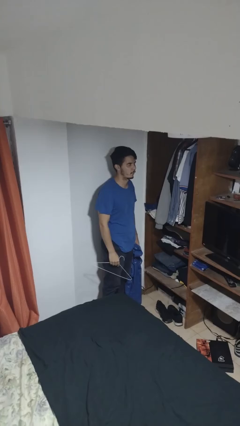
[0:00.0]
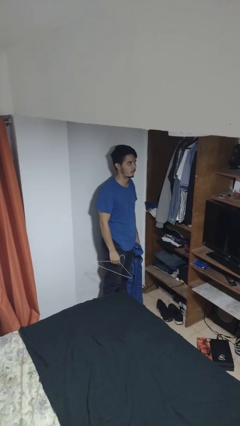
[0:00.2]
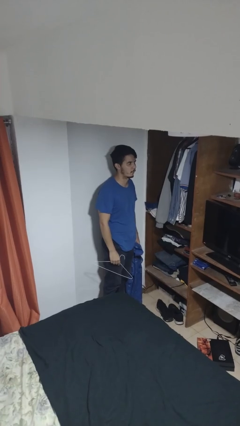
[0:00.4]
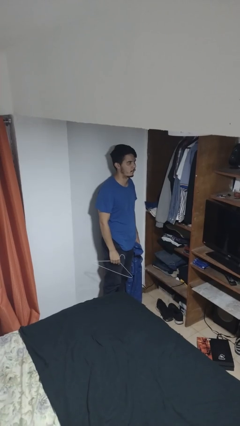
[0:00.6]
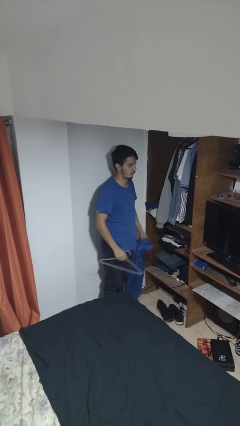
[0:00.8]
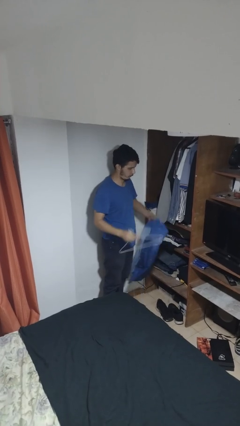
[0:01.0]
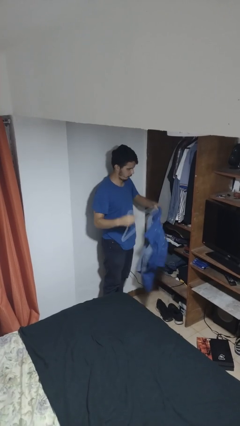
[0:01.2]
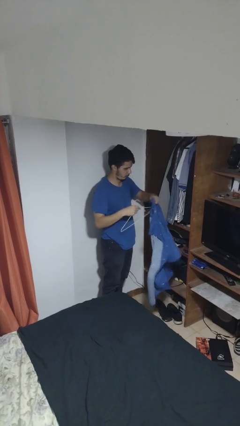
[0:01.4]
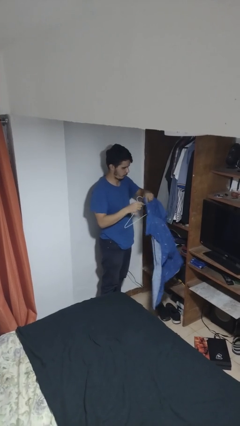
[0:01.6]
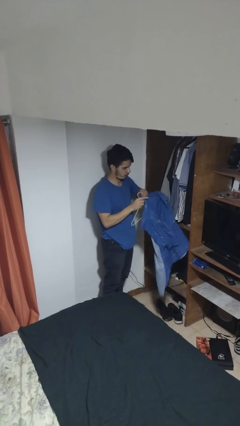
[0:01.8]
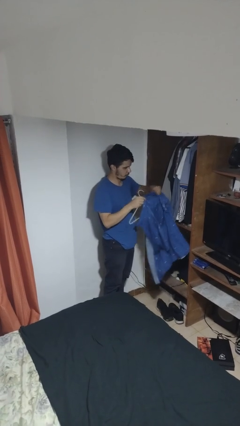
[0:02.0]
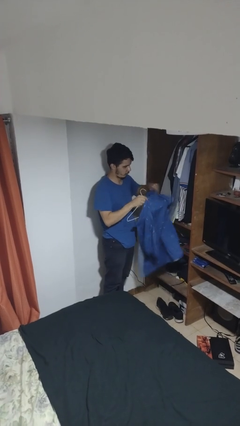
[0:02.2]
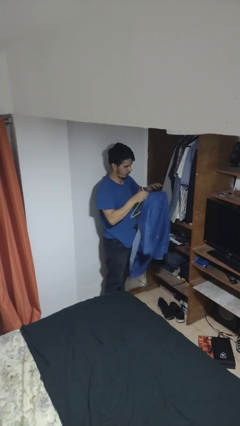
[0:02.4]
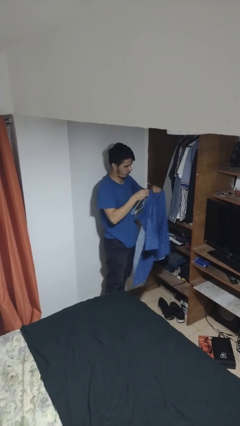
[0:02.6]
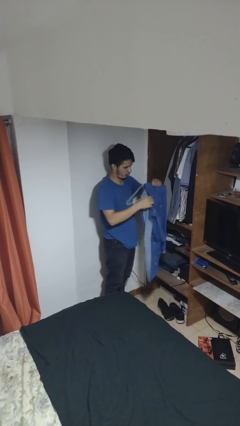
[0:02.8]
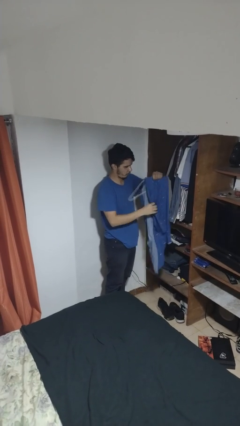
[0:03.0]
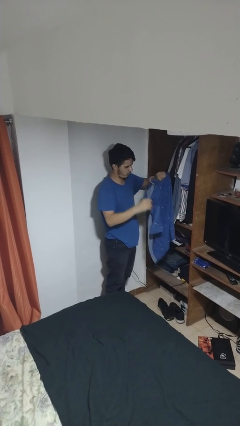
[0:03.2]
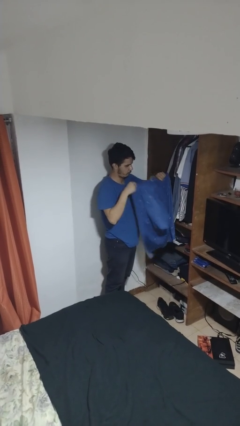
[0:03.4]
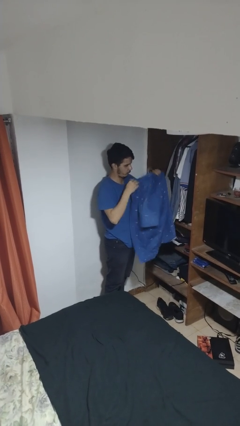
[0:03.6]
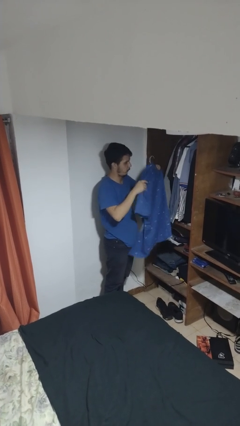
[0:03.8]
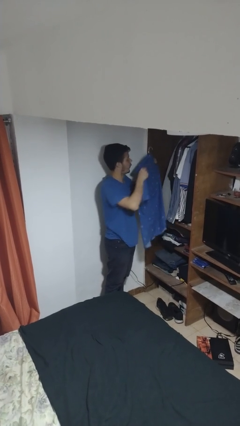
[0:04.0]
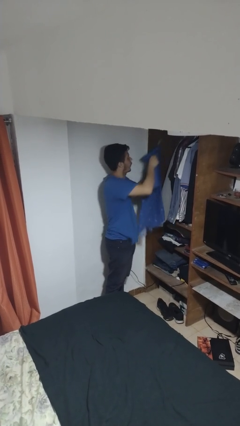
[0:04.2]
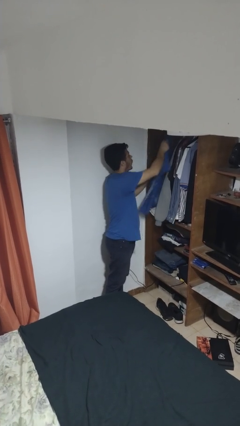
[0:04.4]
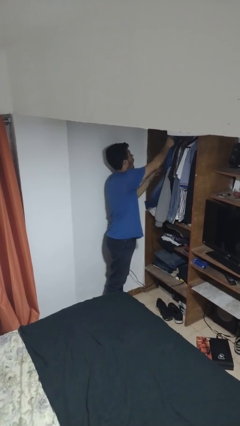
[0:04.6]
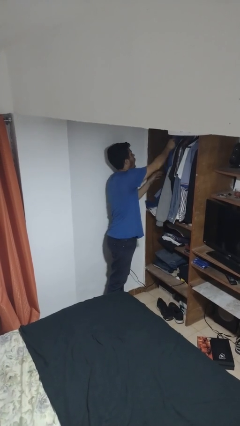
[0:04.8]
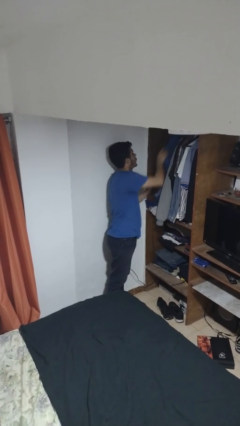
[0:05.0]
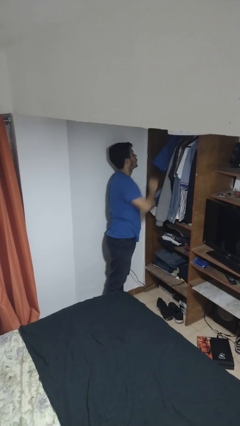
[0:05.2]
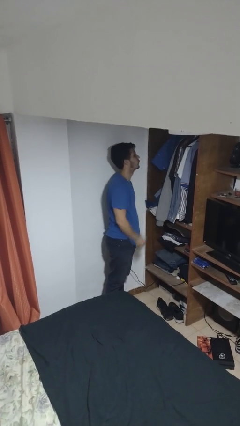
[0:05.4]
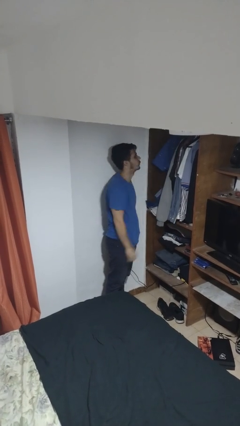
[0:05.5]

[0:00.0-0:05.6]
person puts clothes into closet

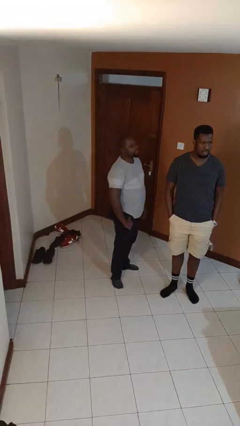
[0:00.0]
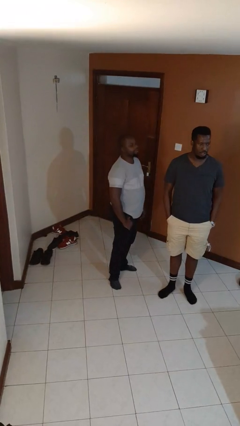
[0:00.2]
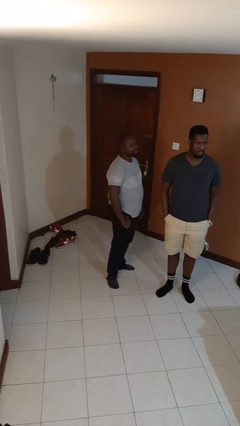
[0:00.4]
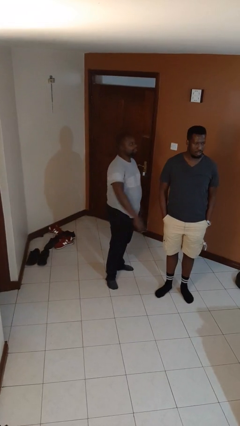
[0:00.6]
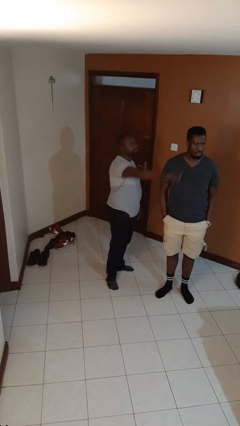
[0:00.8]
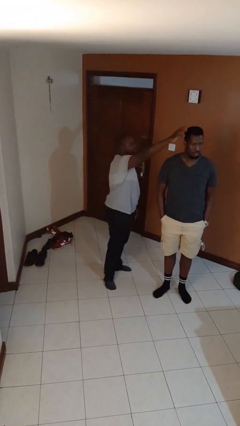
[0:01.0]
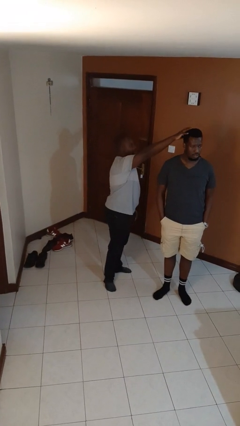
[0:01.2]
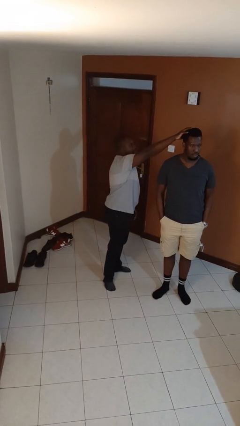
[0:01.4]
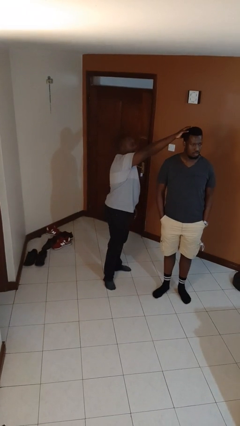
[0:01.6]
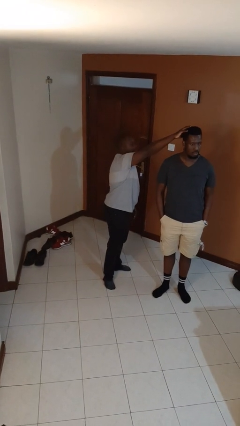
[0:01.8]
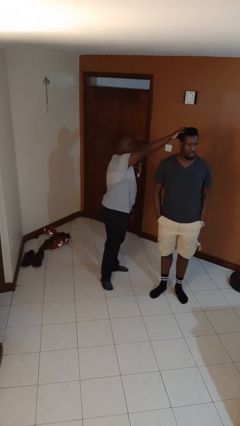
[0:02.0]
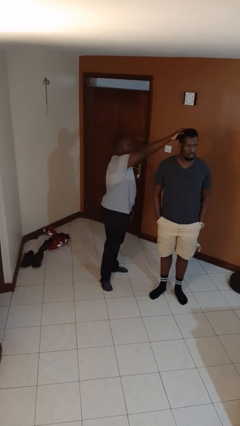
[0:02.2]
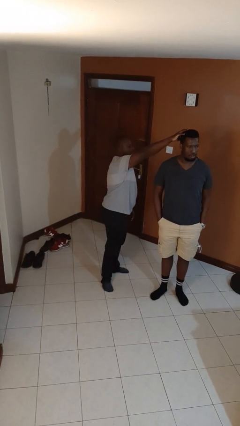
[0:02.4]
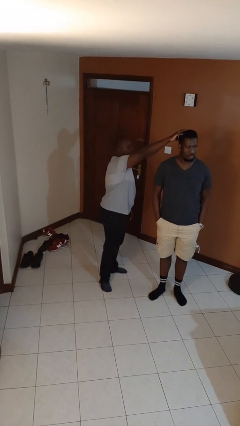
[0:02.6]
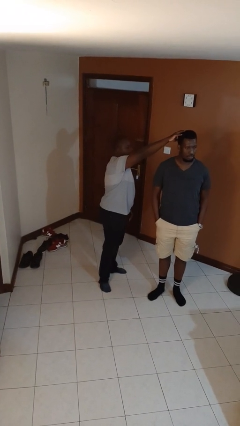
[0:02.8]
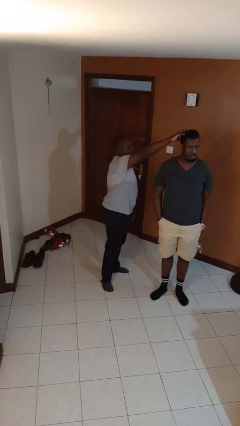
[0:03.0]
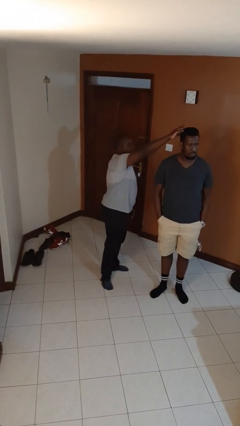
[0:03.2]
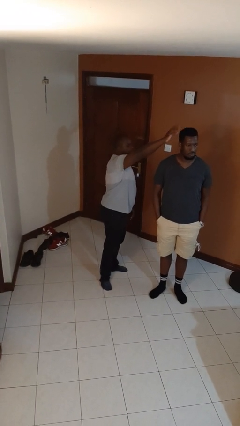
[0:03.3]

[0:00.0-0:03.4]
person grabs person by hair

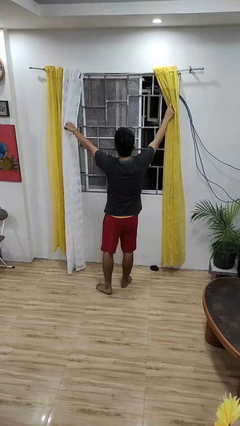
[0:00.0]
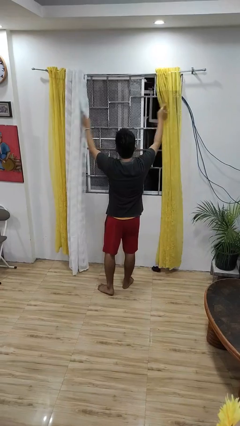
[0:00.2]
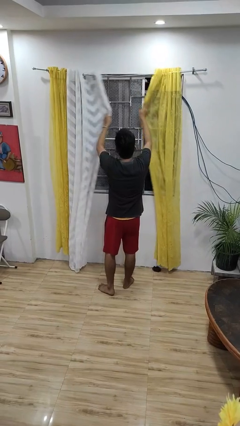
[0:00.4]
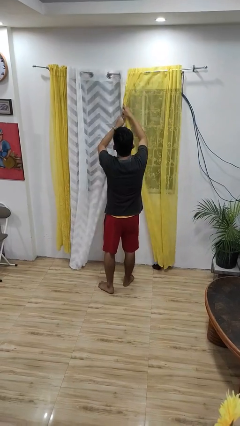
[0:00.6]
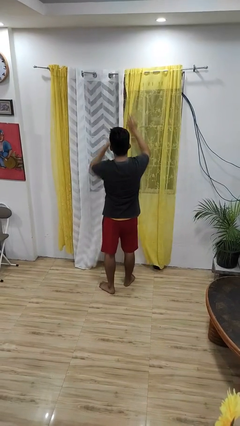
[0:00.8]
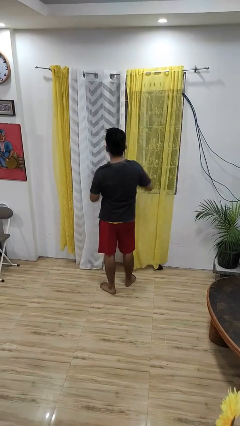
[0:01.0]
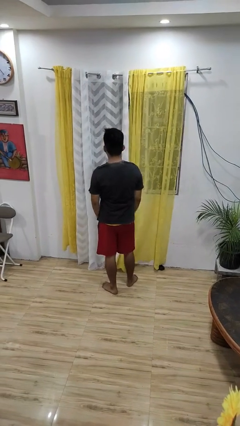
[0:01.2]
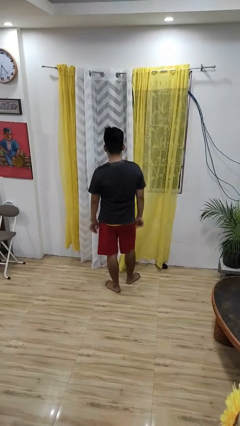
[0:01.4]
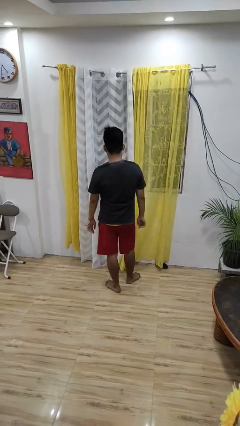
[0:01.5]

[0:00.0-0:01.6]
person closes curtains

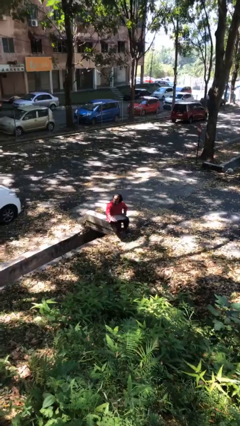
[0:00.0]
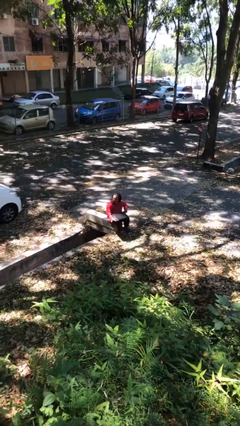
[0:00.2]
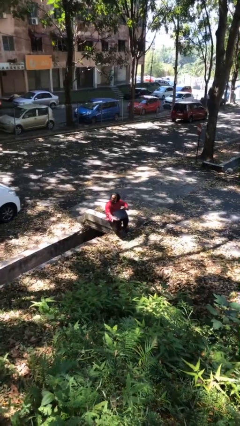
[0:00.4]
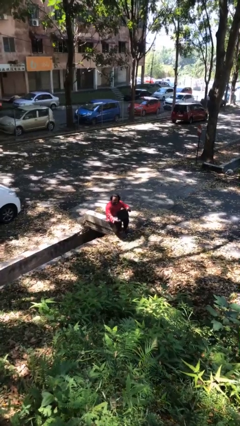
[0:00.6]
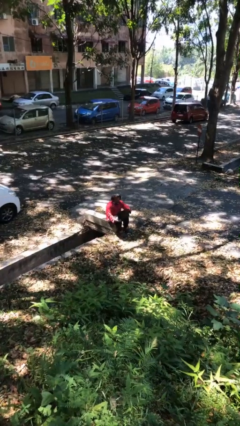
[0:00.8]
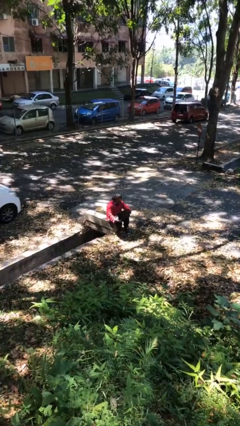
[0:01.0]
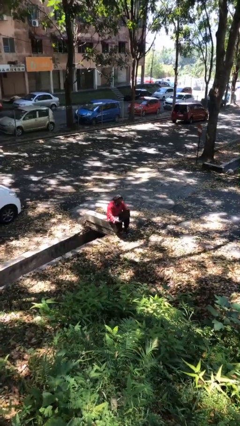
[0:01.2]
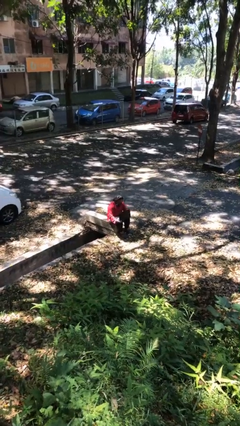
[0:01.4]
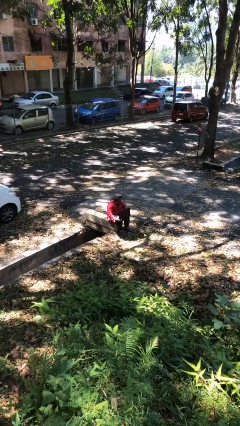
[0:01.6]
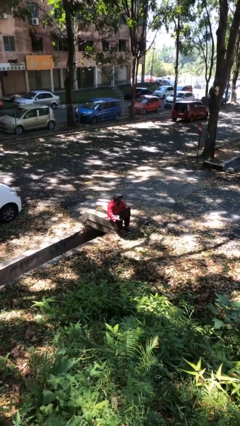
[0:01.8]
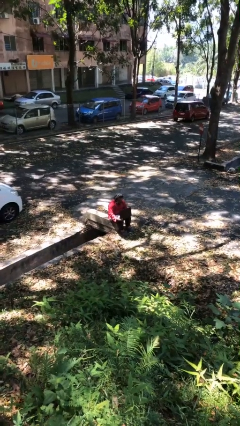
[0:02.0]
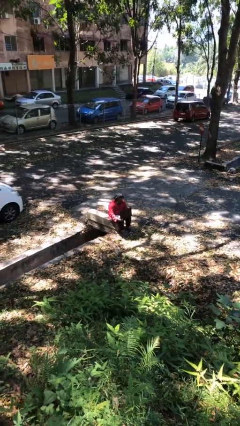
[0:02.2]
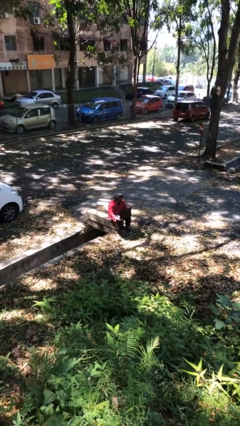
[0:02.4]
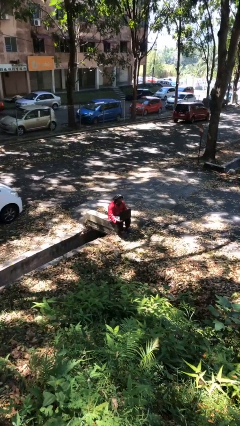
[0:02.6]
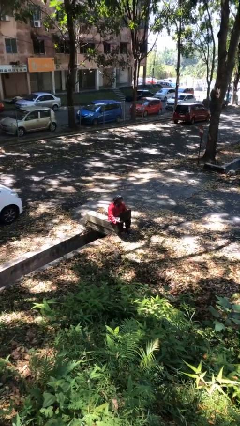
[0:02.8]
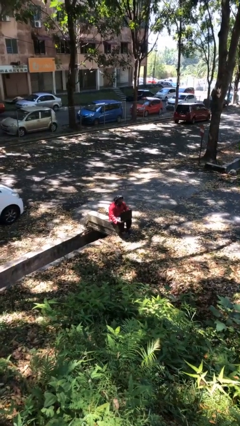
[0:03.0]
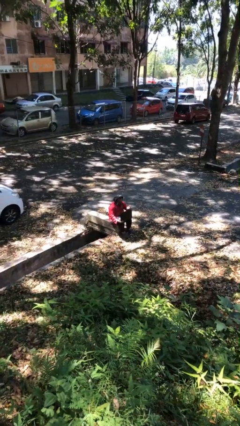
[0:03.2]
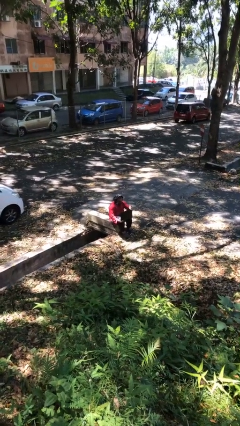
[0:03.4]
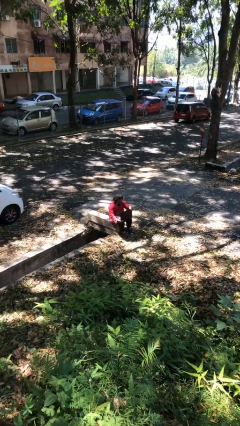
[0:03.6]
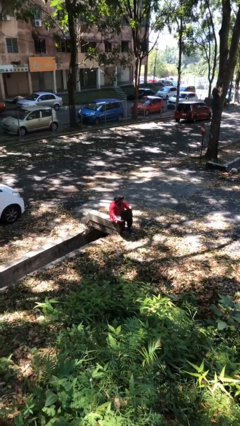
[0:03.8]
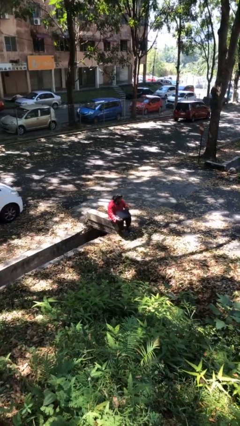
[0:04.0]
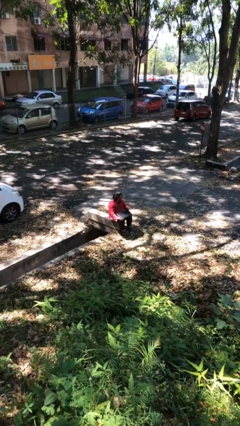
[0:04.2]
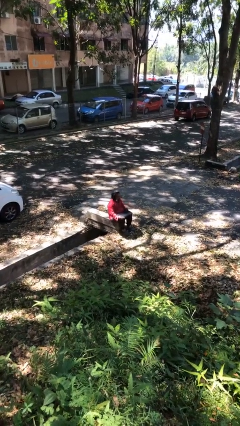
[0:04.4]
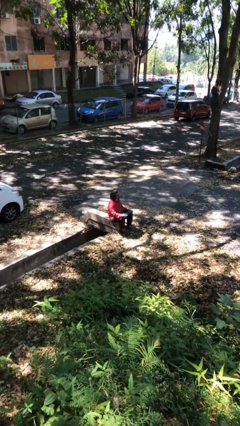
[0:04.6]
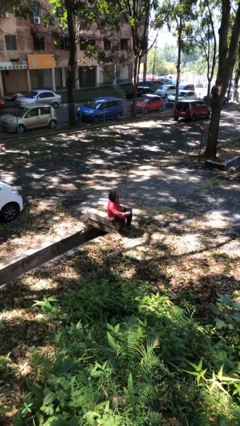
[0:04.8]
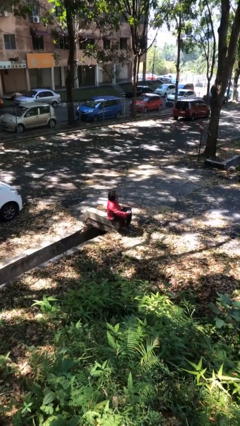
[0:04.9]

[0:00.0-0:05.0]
person interacts with laptop

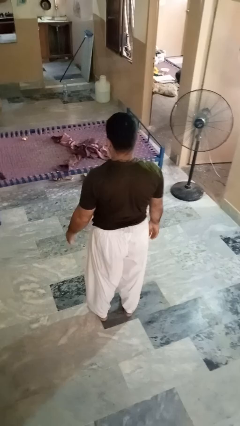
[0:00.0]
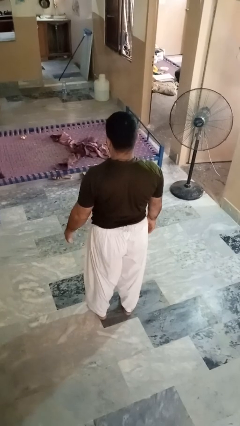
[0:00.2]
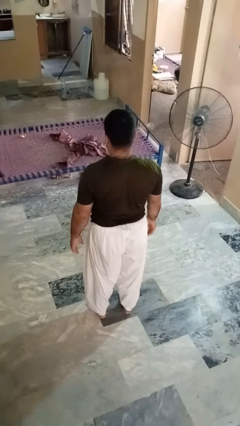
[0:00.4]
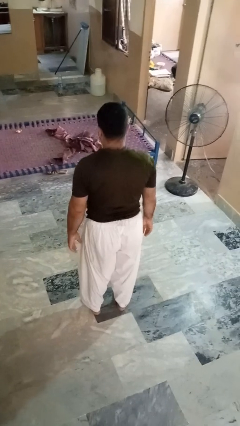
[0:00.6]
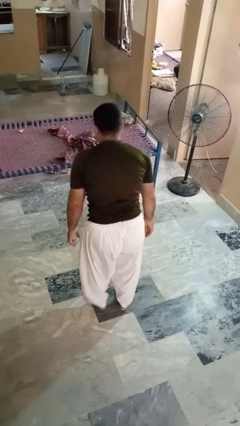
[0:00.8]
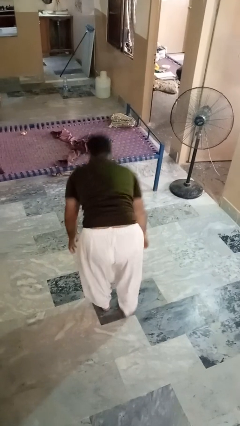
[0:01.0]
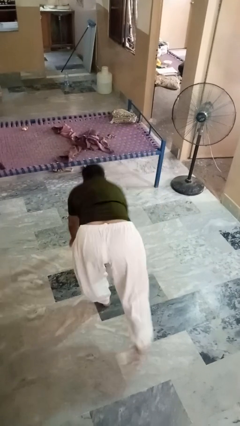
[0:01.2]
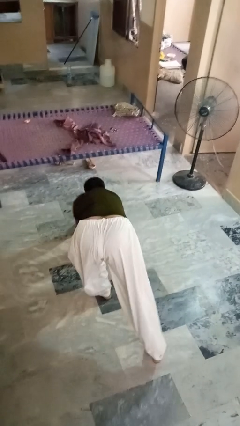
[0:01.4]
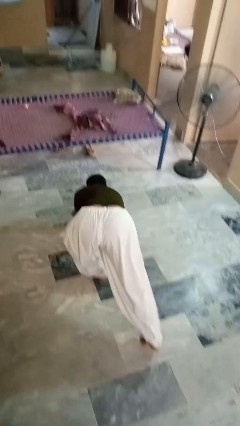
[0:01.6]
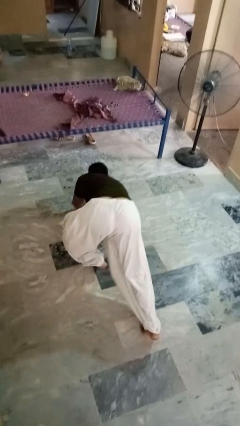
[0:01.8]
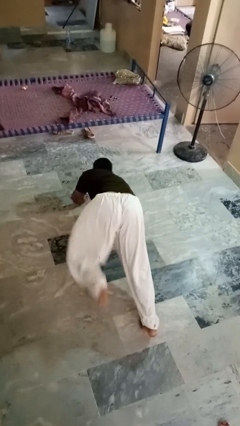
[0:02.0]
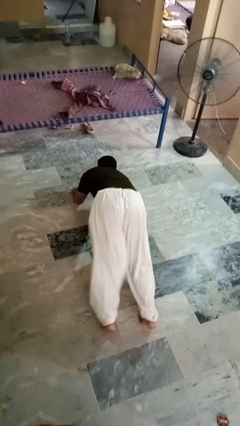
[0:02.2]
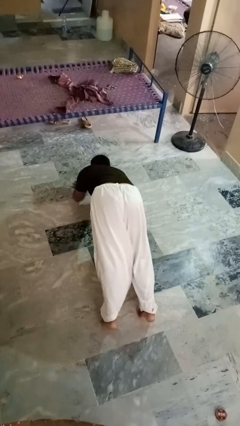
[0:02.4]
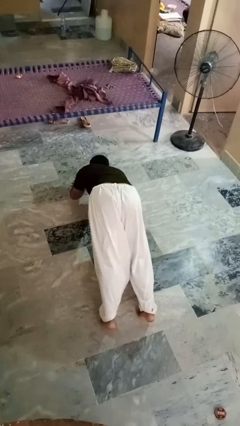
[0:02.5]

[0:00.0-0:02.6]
person exercises with plank
